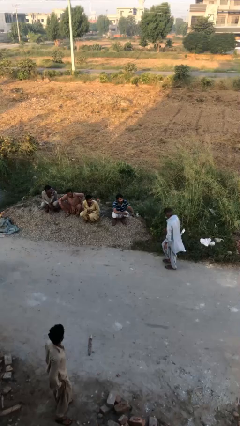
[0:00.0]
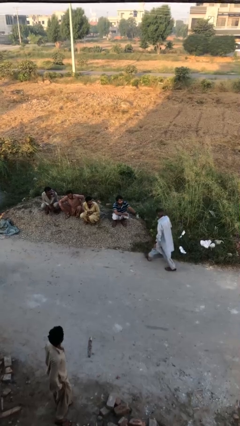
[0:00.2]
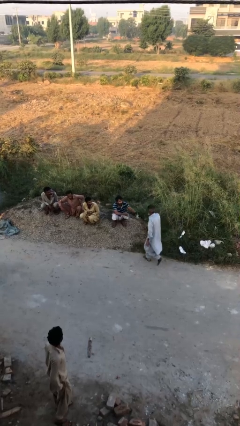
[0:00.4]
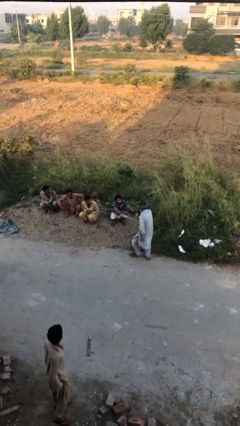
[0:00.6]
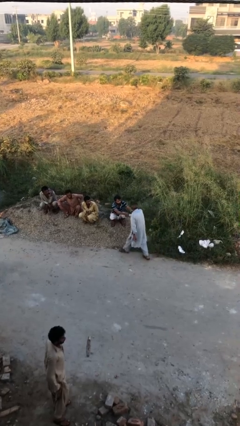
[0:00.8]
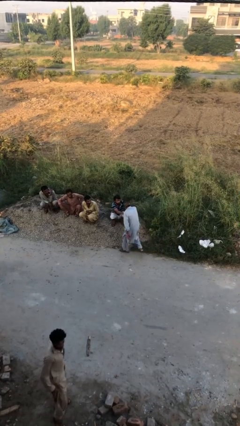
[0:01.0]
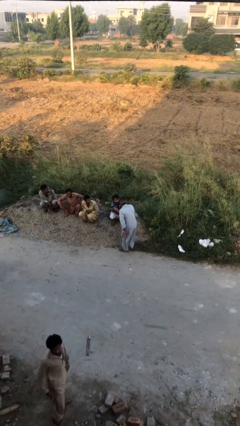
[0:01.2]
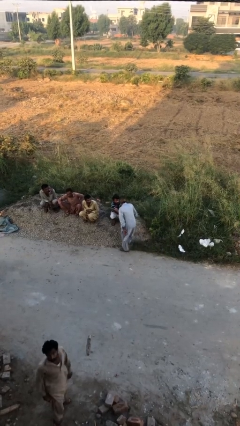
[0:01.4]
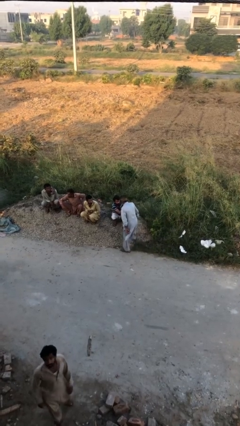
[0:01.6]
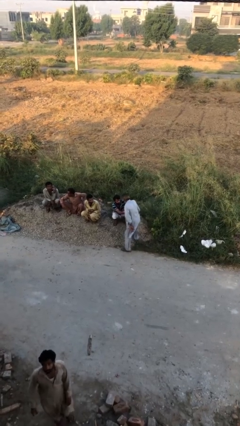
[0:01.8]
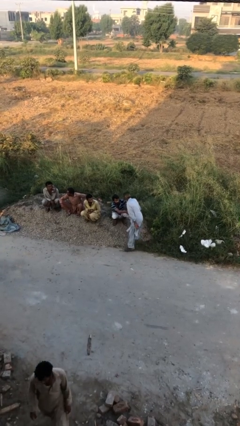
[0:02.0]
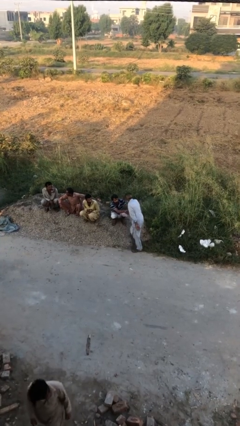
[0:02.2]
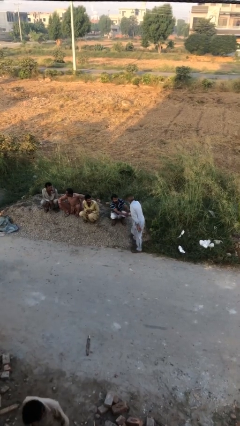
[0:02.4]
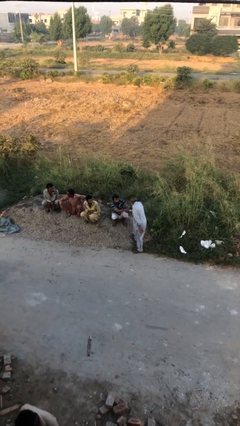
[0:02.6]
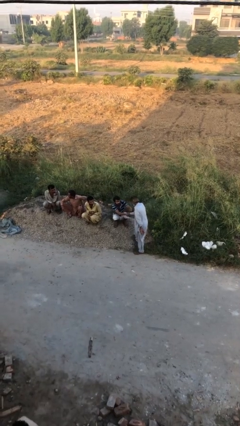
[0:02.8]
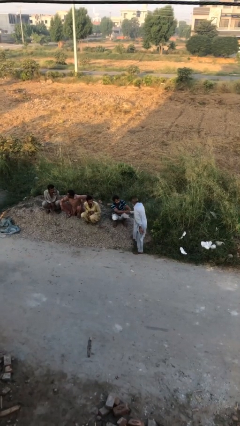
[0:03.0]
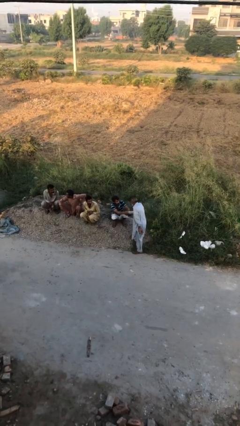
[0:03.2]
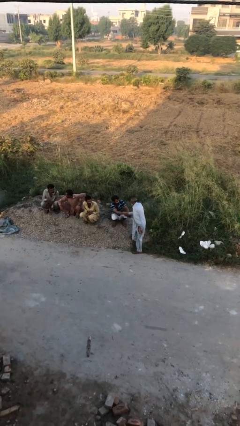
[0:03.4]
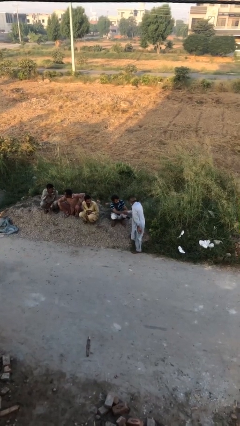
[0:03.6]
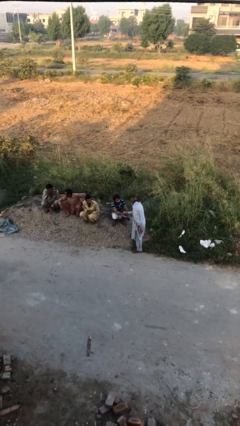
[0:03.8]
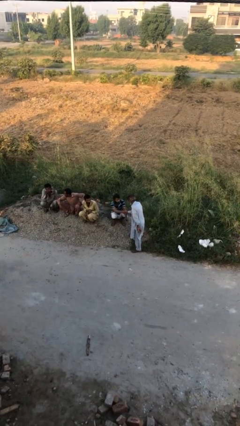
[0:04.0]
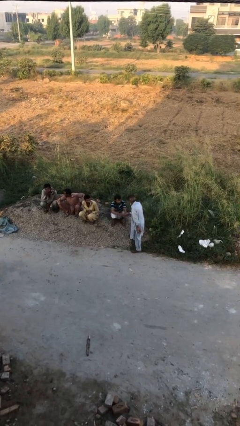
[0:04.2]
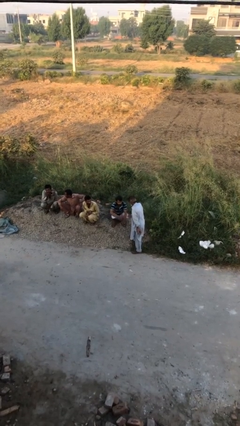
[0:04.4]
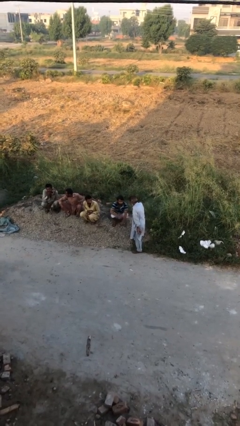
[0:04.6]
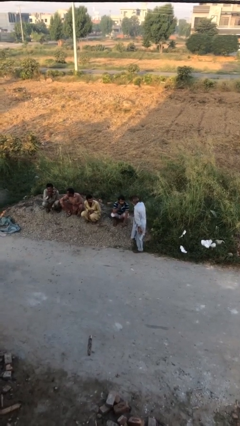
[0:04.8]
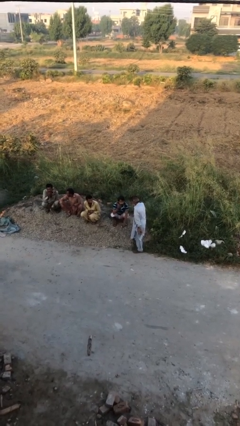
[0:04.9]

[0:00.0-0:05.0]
person shakes hand

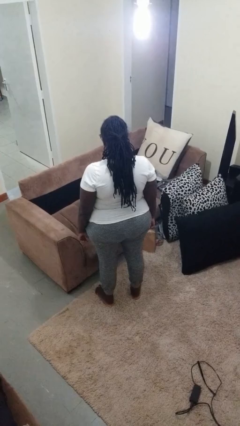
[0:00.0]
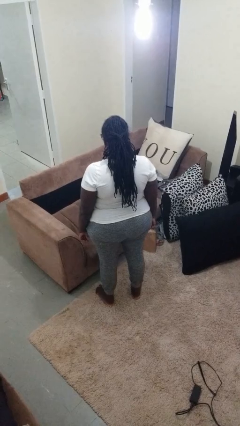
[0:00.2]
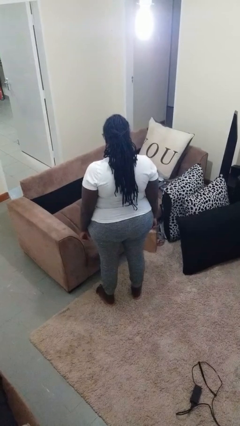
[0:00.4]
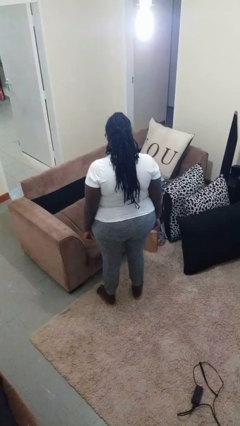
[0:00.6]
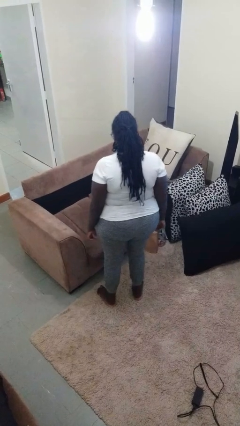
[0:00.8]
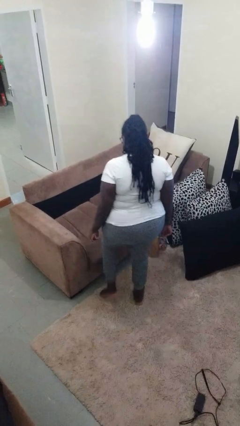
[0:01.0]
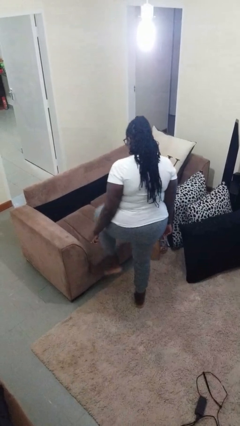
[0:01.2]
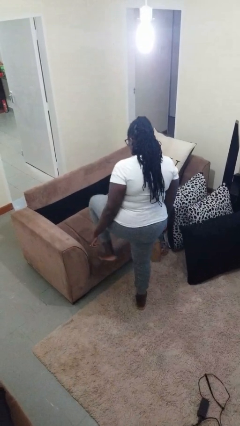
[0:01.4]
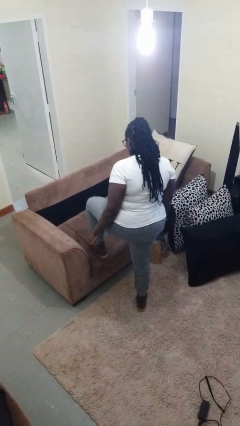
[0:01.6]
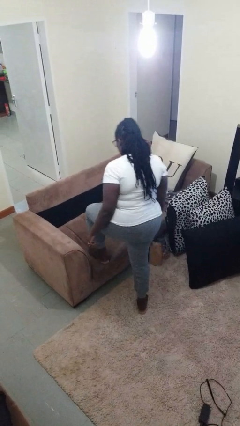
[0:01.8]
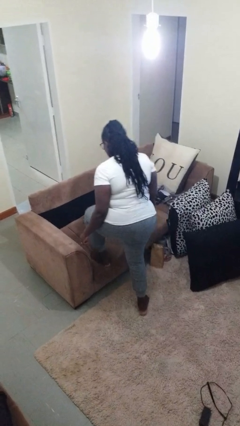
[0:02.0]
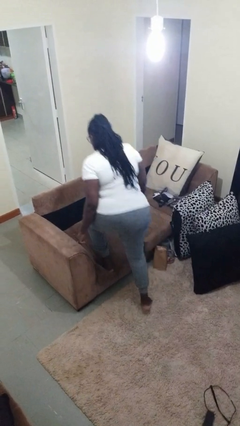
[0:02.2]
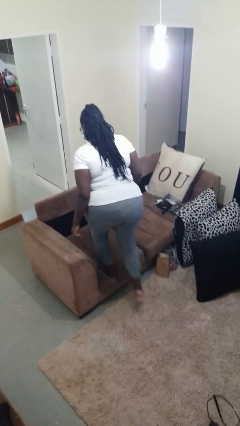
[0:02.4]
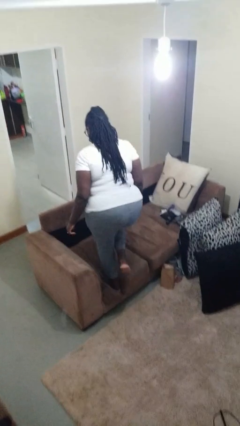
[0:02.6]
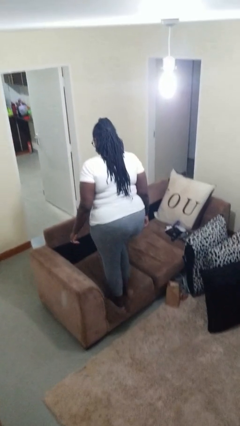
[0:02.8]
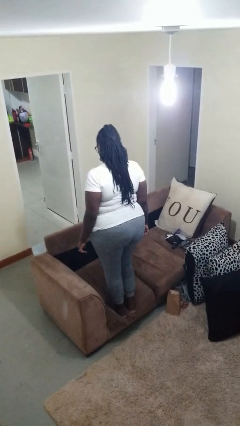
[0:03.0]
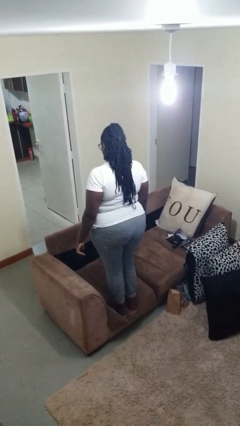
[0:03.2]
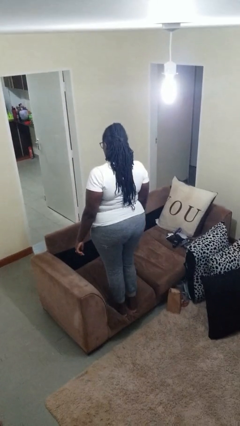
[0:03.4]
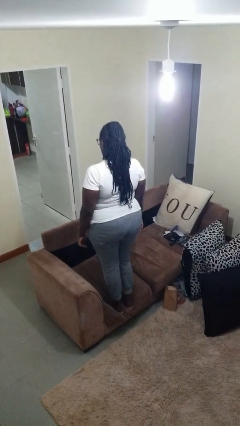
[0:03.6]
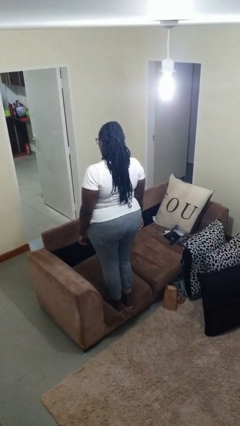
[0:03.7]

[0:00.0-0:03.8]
person climbs on couch

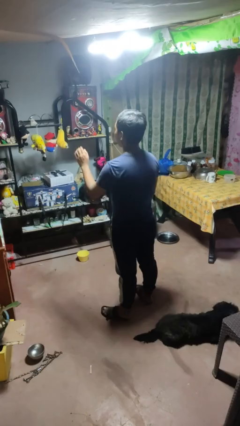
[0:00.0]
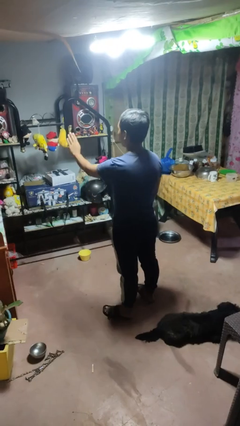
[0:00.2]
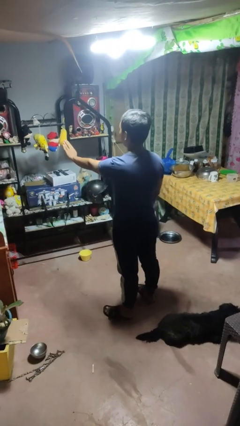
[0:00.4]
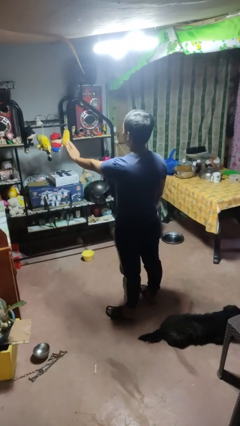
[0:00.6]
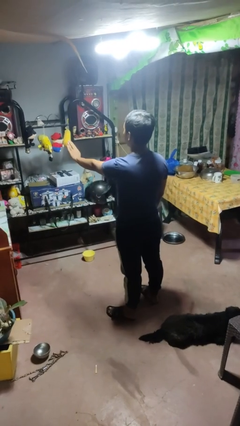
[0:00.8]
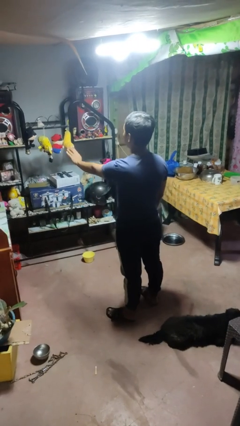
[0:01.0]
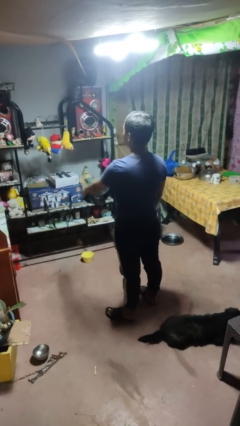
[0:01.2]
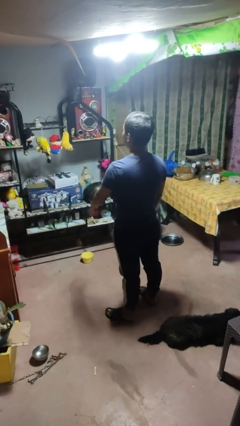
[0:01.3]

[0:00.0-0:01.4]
person gestures stop

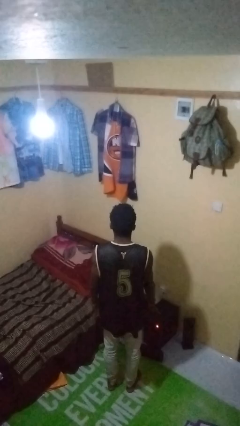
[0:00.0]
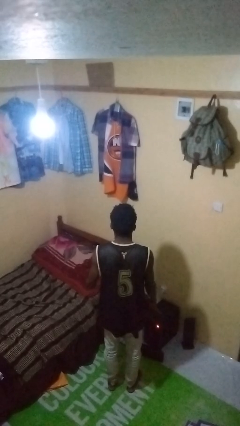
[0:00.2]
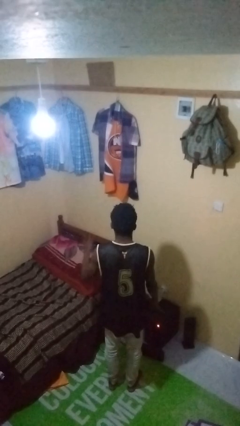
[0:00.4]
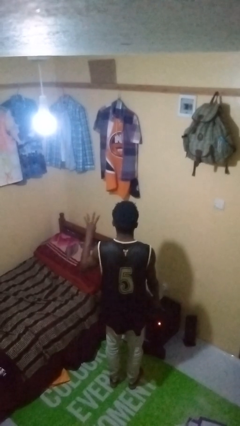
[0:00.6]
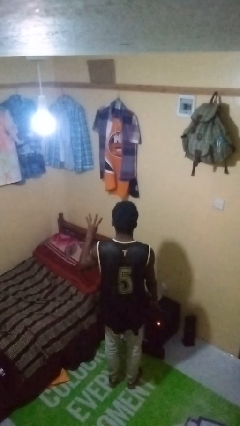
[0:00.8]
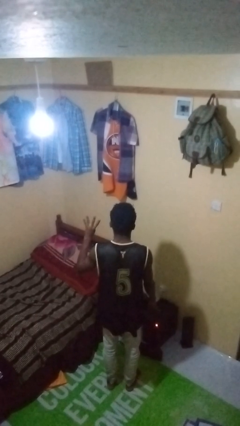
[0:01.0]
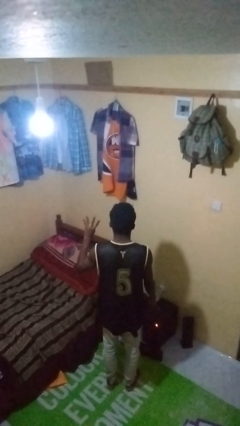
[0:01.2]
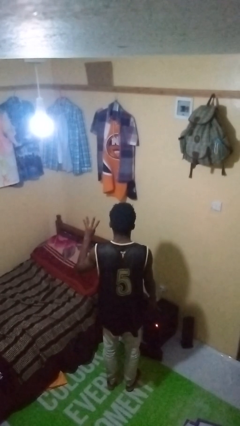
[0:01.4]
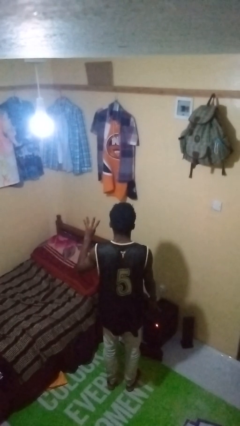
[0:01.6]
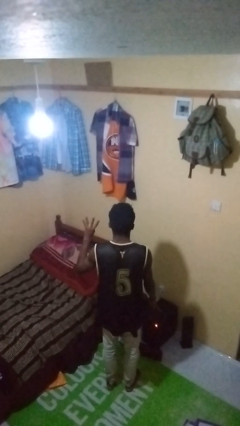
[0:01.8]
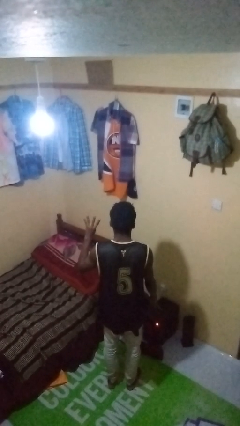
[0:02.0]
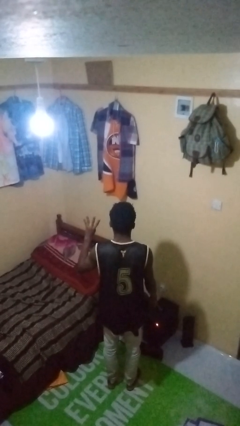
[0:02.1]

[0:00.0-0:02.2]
person gestures number four

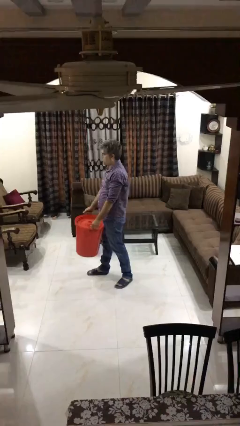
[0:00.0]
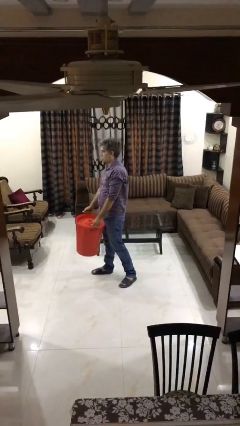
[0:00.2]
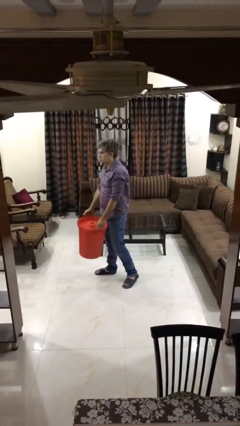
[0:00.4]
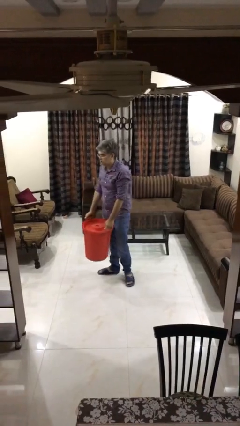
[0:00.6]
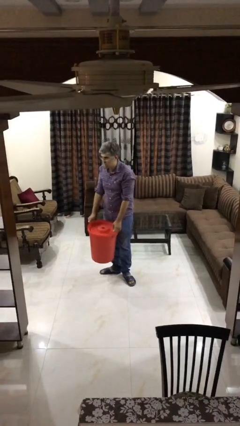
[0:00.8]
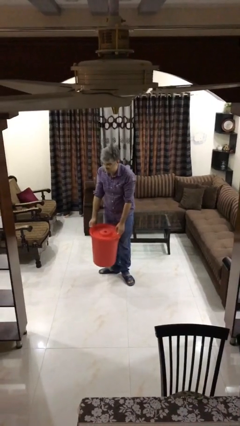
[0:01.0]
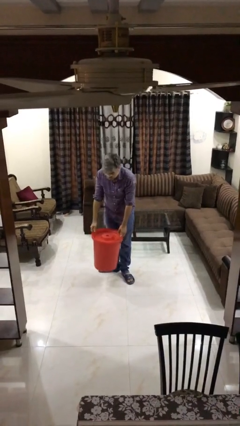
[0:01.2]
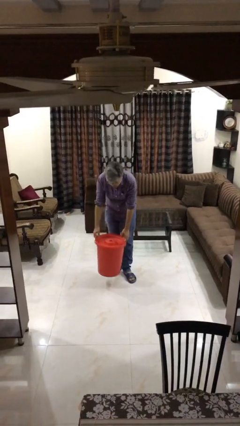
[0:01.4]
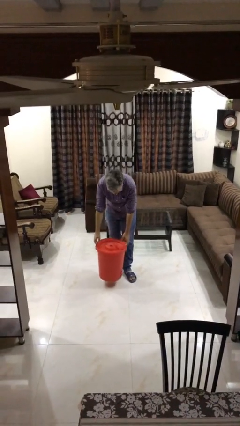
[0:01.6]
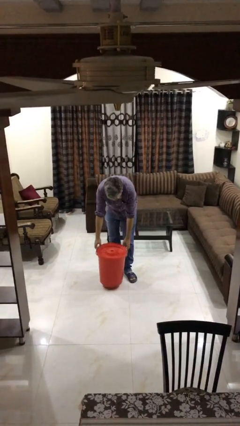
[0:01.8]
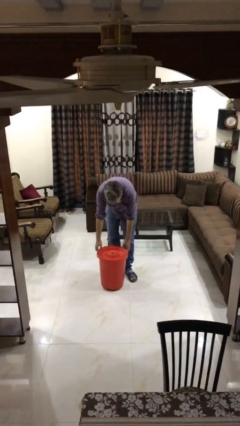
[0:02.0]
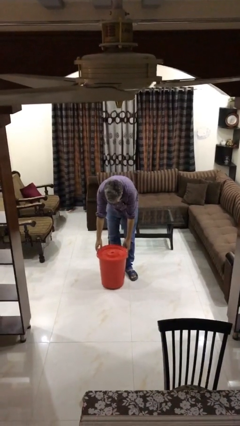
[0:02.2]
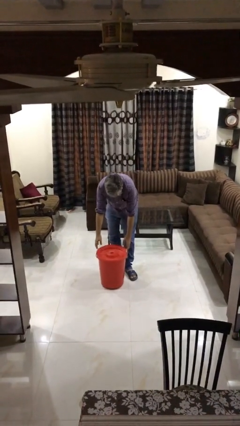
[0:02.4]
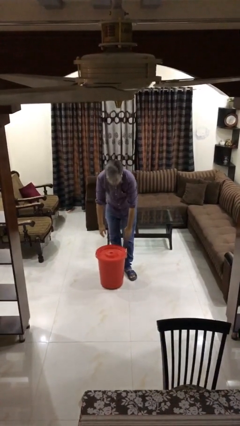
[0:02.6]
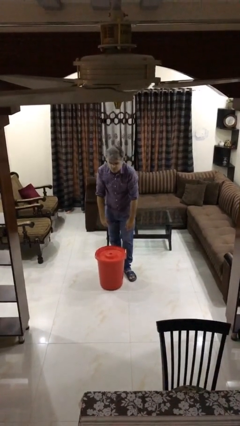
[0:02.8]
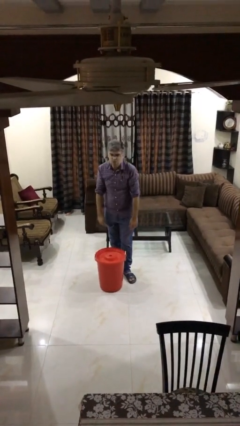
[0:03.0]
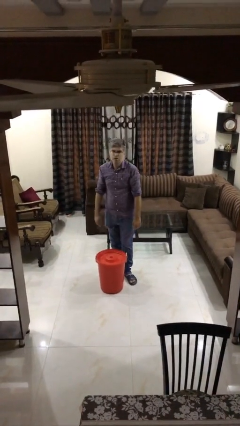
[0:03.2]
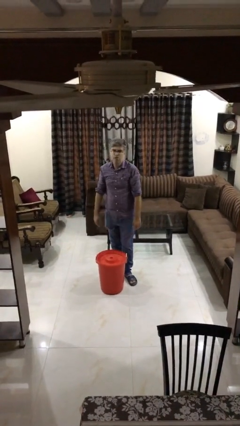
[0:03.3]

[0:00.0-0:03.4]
person puts down object on floor

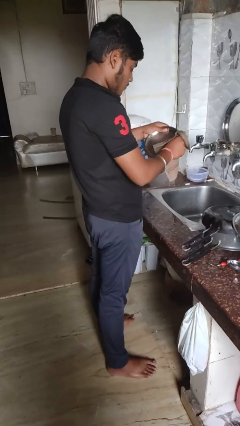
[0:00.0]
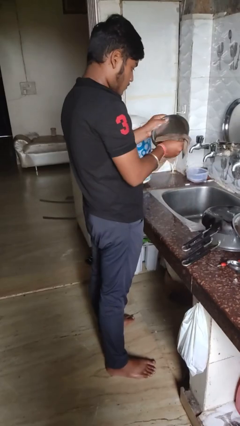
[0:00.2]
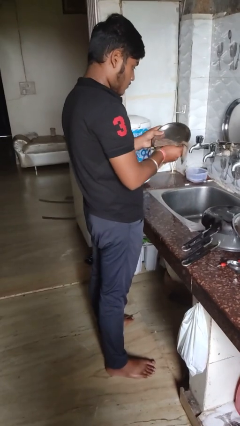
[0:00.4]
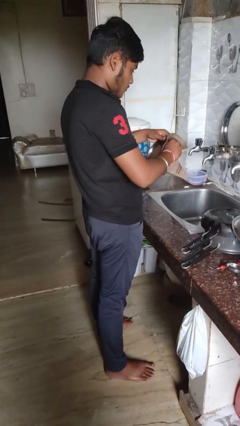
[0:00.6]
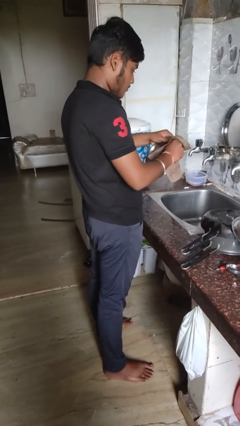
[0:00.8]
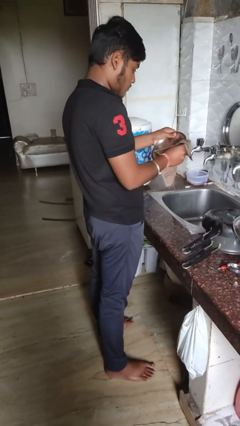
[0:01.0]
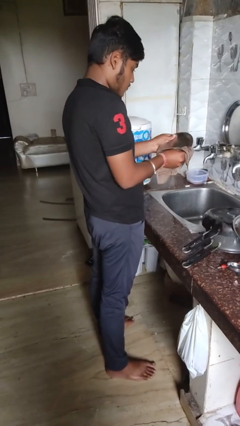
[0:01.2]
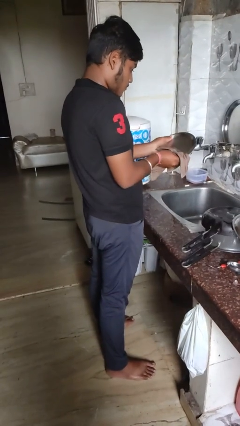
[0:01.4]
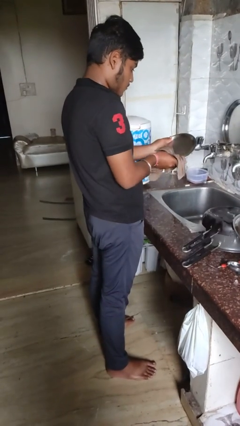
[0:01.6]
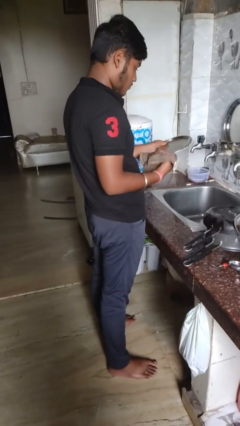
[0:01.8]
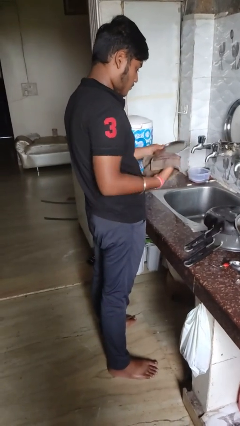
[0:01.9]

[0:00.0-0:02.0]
person dries dish
